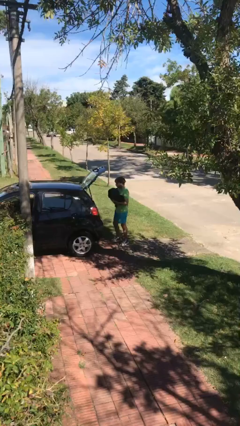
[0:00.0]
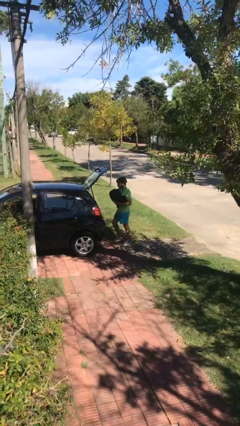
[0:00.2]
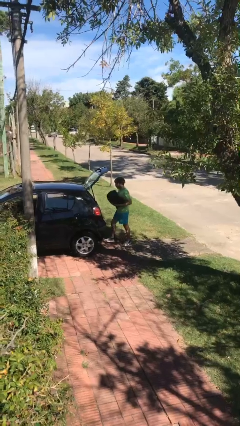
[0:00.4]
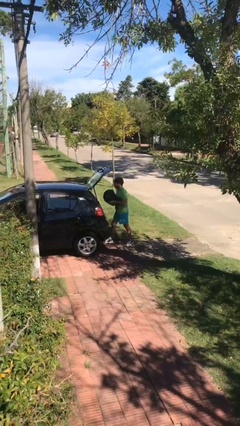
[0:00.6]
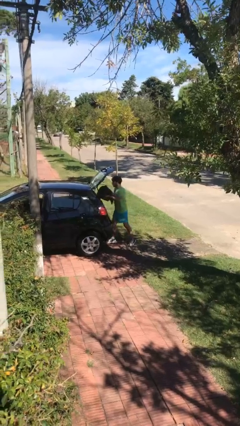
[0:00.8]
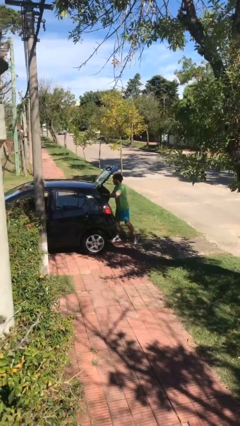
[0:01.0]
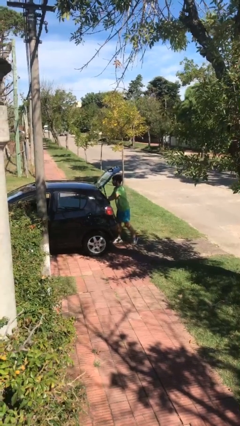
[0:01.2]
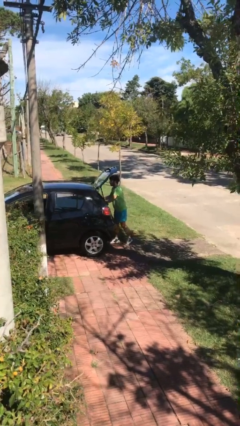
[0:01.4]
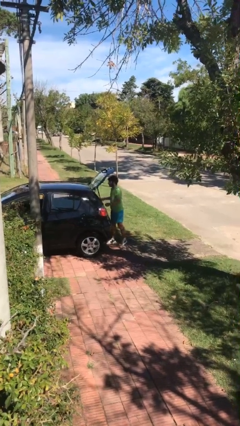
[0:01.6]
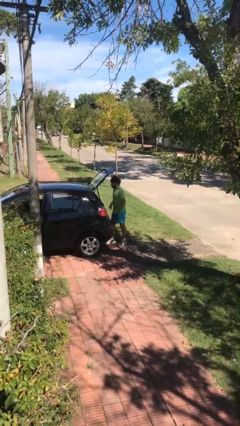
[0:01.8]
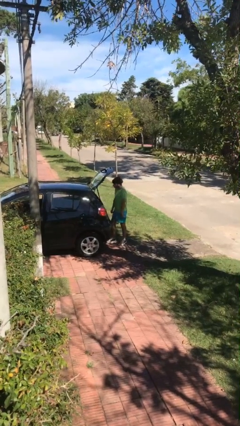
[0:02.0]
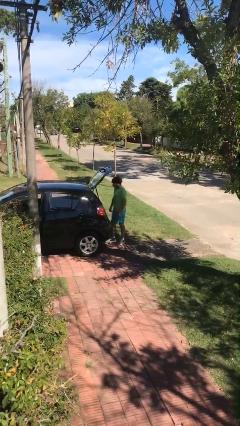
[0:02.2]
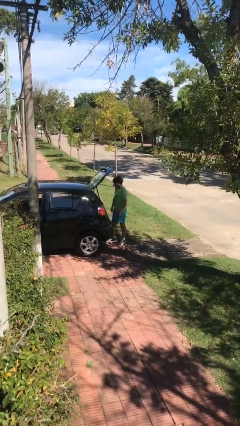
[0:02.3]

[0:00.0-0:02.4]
person loads car

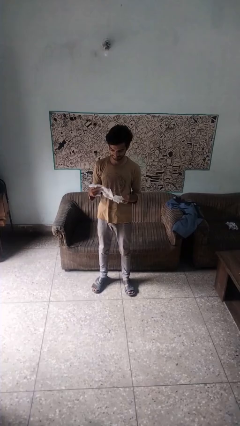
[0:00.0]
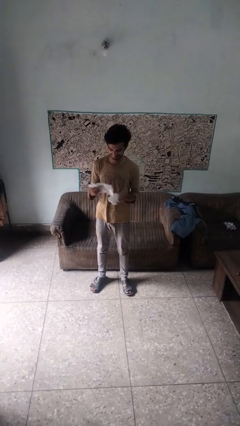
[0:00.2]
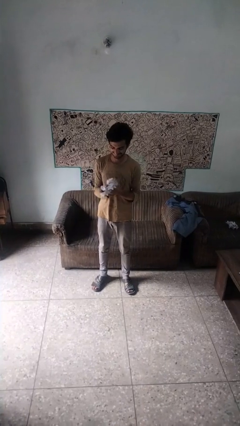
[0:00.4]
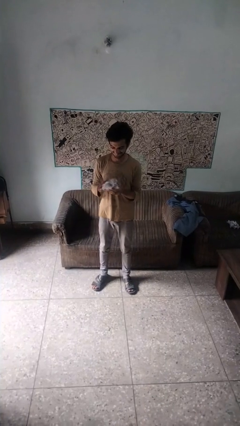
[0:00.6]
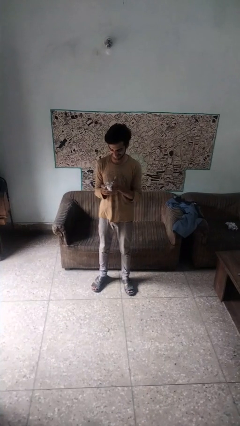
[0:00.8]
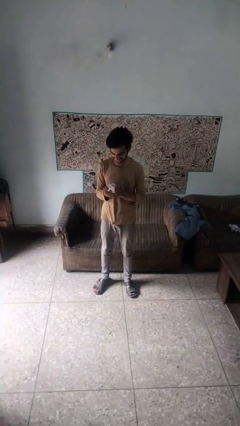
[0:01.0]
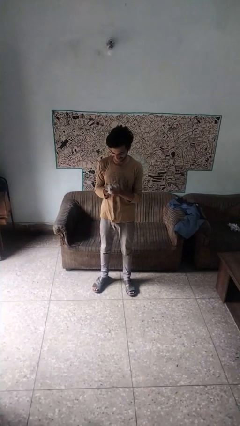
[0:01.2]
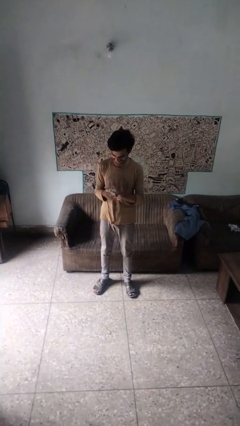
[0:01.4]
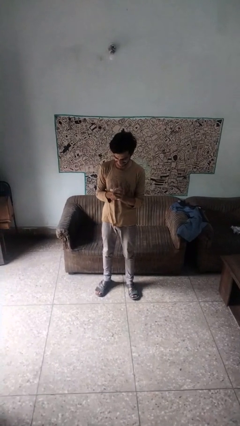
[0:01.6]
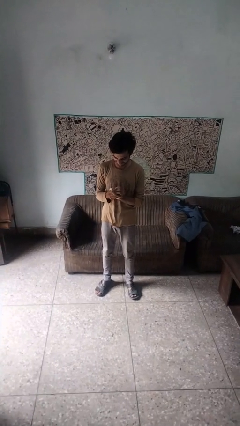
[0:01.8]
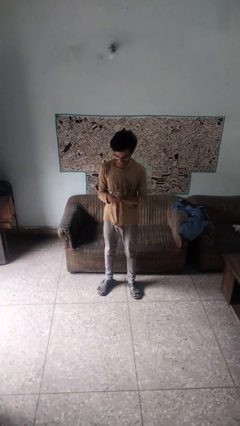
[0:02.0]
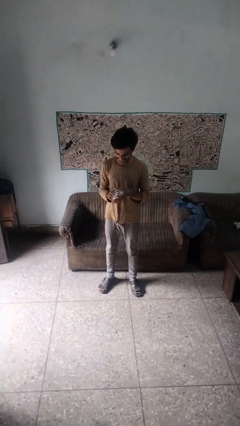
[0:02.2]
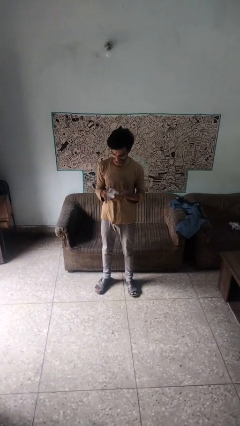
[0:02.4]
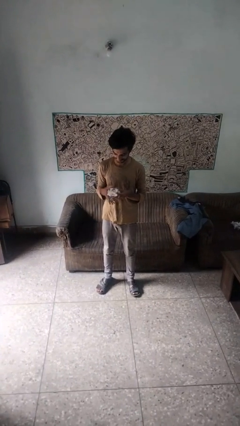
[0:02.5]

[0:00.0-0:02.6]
person crumples paper

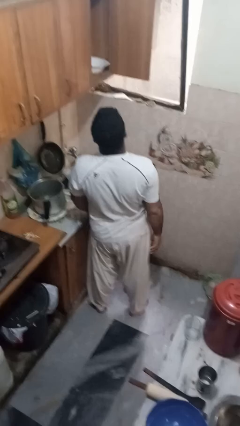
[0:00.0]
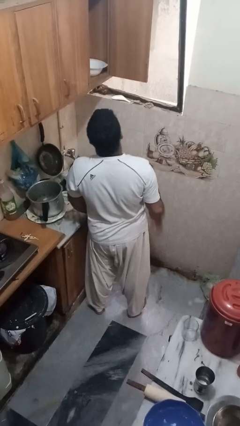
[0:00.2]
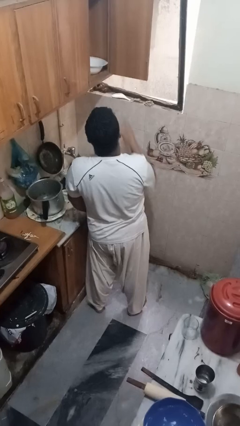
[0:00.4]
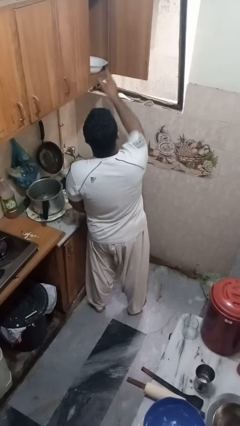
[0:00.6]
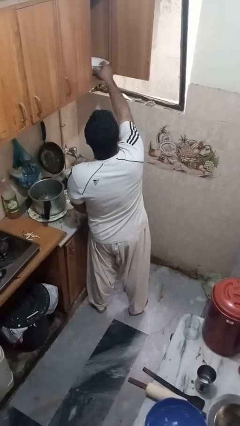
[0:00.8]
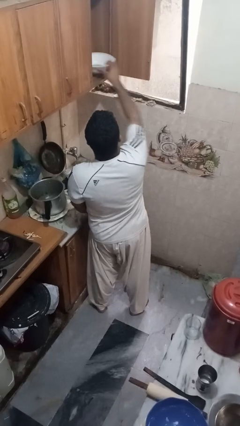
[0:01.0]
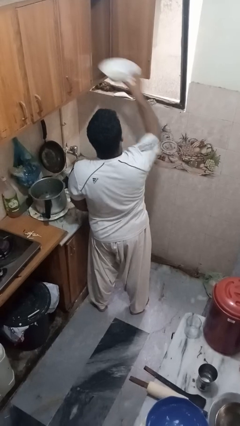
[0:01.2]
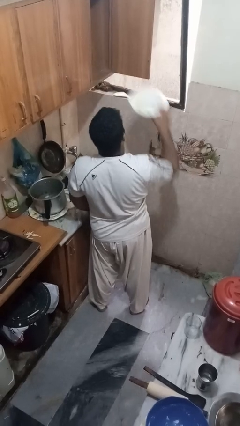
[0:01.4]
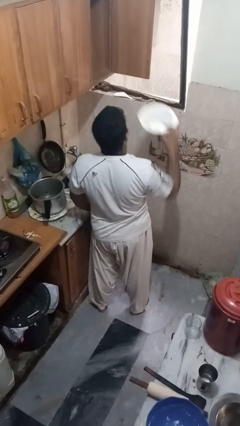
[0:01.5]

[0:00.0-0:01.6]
person takes object from cabinet

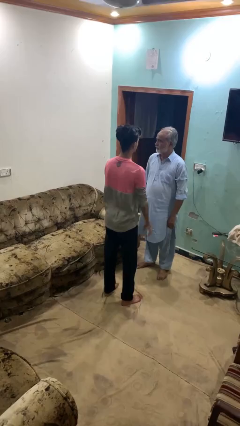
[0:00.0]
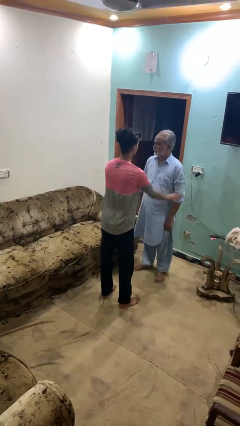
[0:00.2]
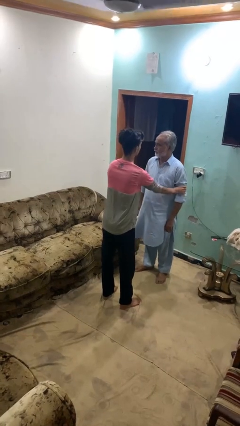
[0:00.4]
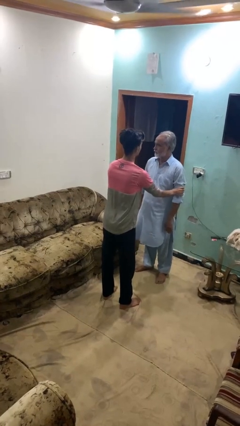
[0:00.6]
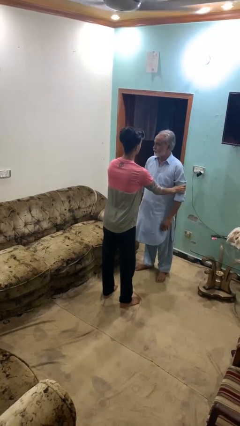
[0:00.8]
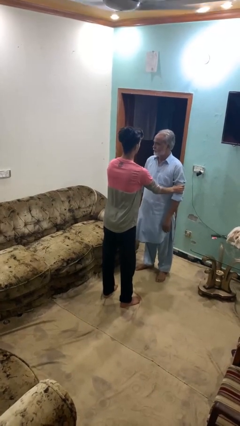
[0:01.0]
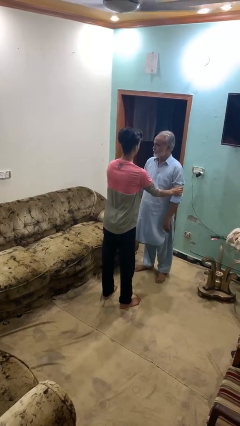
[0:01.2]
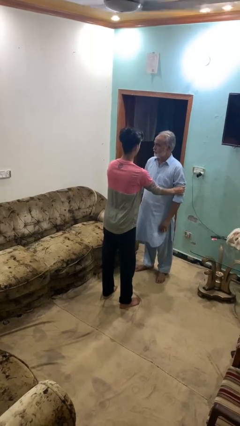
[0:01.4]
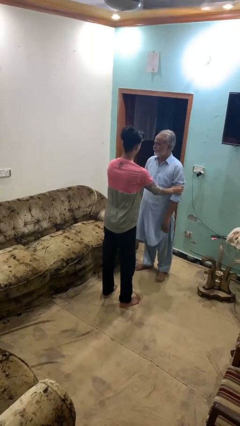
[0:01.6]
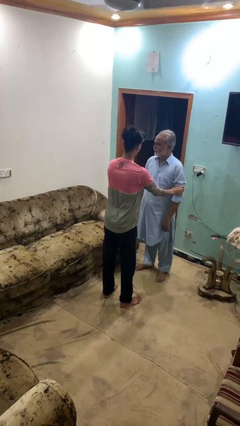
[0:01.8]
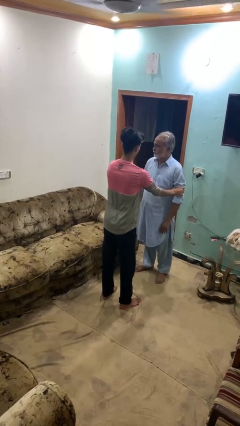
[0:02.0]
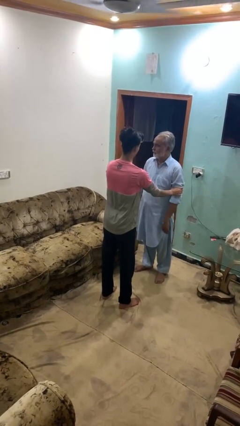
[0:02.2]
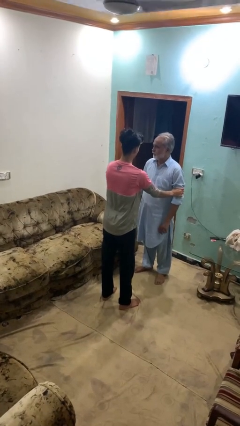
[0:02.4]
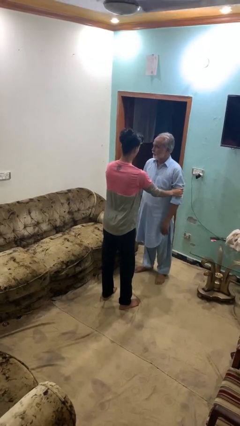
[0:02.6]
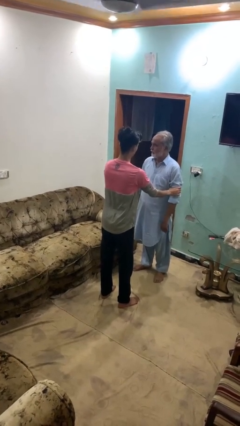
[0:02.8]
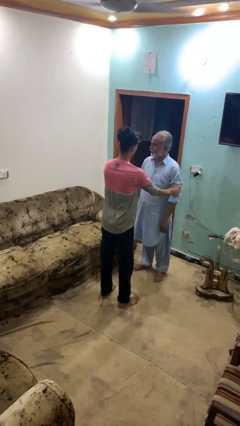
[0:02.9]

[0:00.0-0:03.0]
person grabs person by bicep

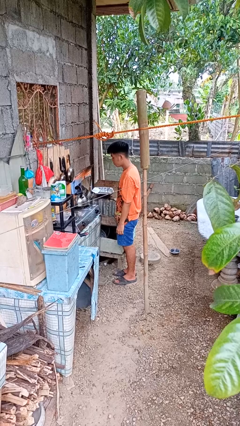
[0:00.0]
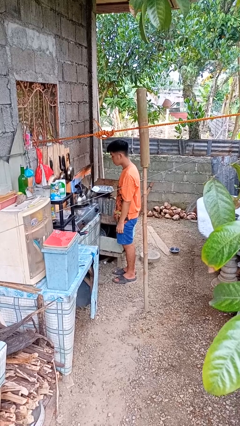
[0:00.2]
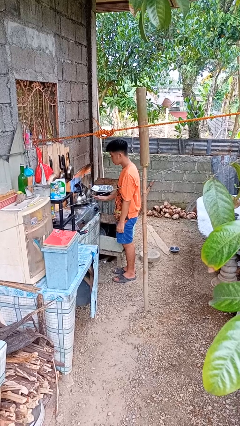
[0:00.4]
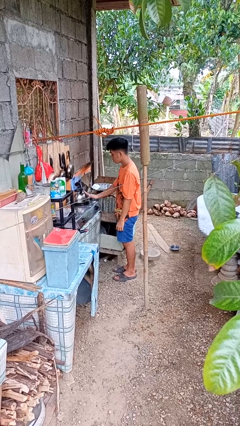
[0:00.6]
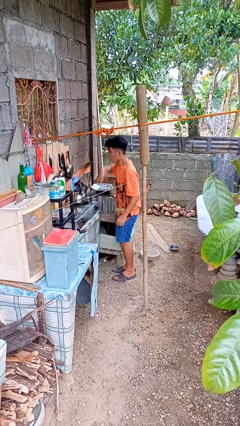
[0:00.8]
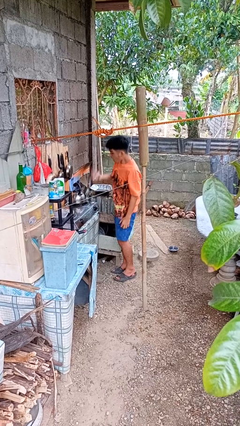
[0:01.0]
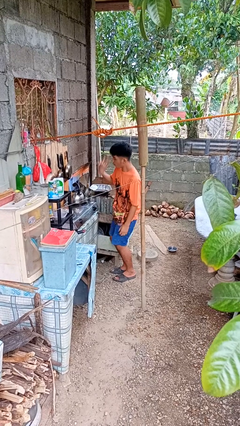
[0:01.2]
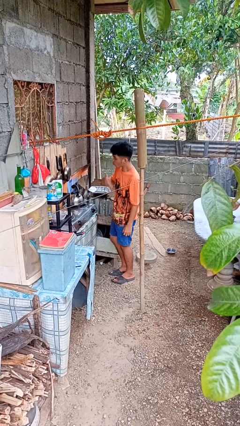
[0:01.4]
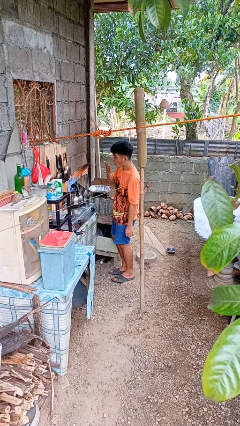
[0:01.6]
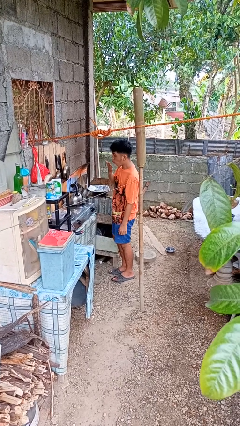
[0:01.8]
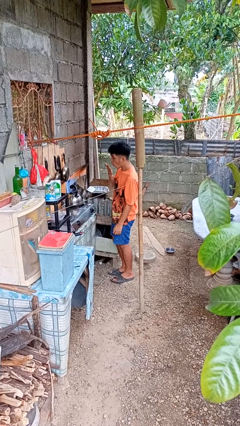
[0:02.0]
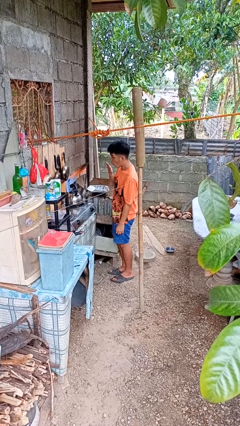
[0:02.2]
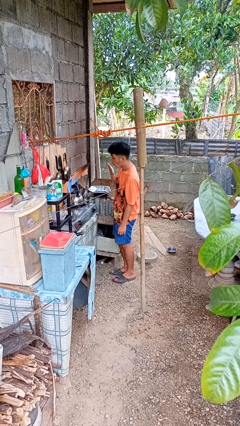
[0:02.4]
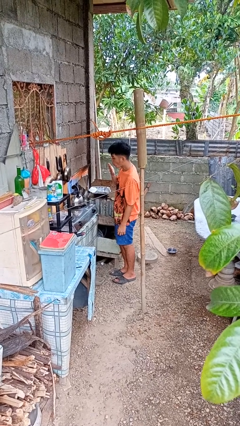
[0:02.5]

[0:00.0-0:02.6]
person burns hand

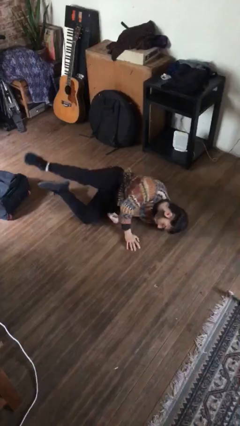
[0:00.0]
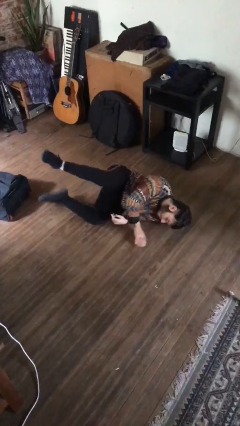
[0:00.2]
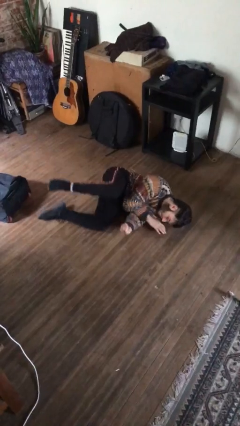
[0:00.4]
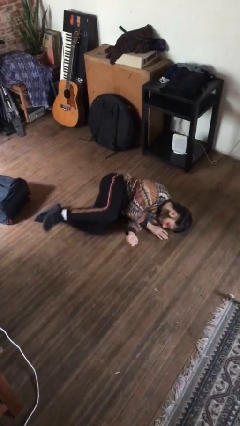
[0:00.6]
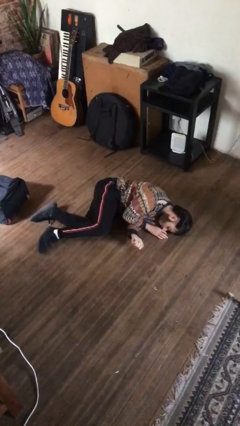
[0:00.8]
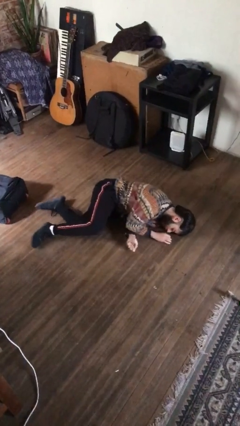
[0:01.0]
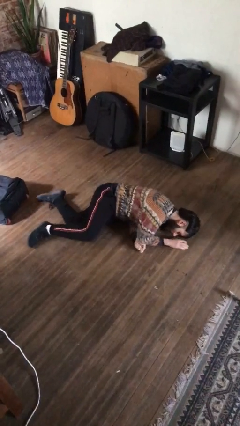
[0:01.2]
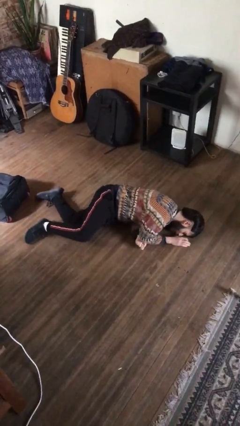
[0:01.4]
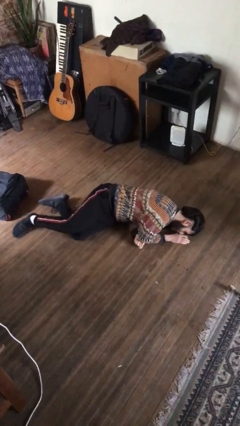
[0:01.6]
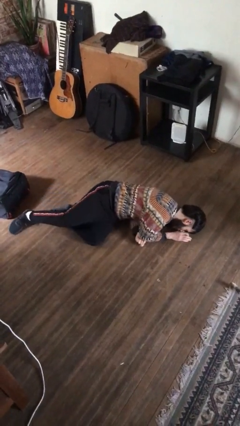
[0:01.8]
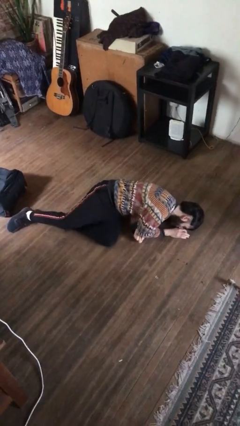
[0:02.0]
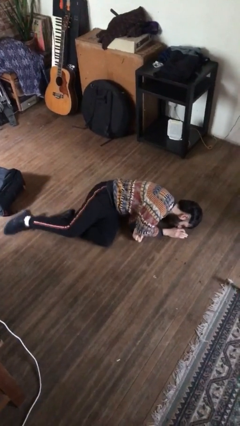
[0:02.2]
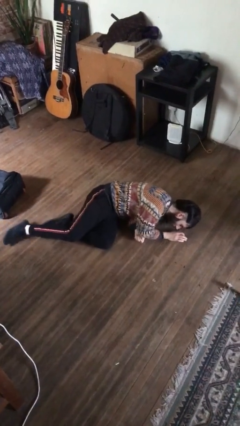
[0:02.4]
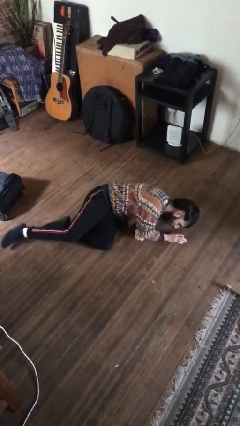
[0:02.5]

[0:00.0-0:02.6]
person lies down on floor

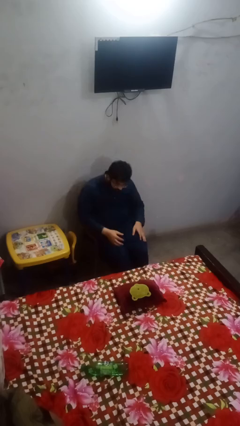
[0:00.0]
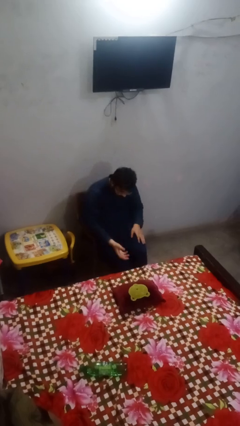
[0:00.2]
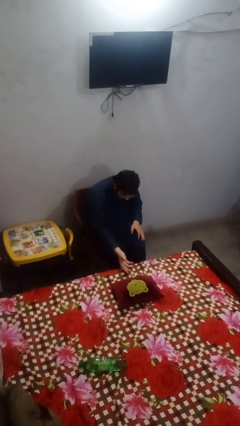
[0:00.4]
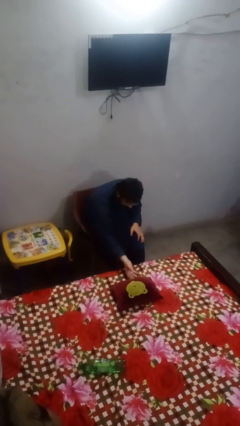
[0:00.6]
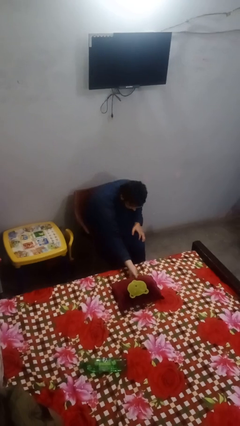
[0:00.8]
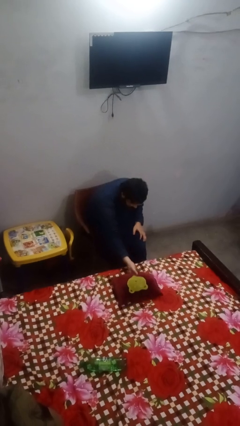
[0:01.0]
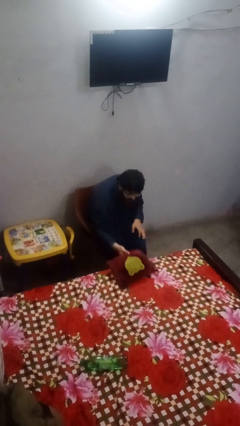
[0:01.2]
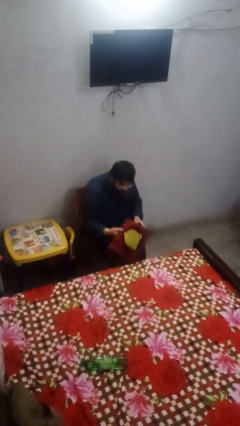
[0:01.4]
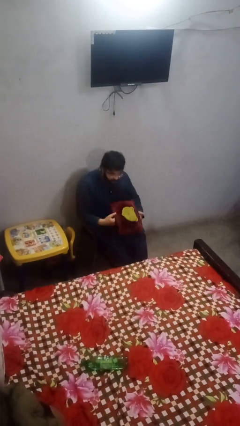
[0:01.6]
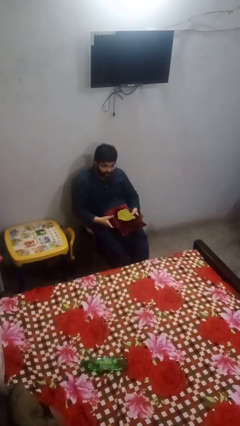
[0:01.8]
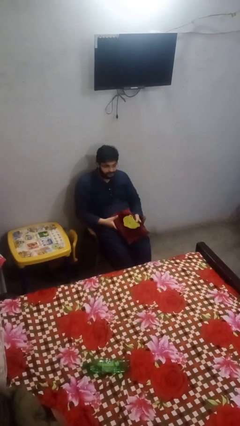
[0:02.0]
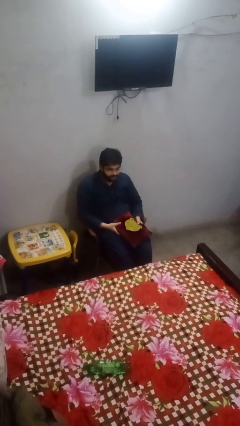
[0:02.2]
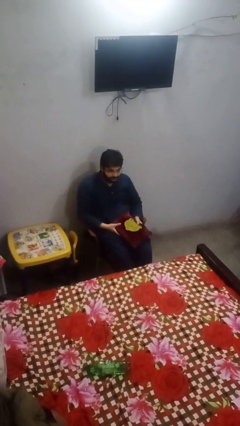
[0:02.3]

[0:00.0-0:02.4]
person picks up object from bed
